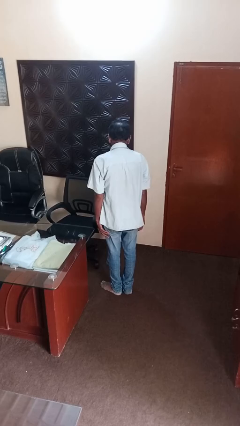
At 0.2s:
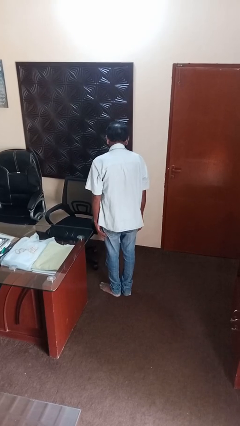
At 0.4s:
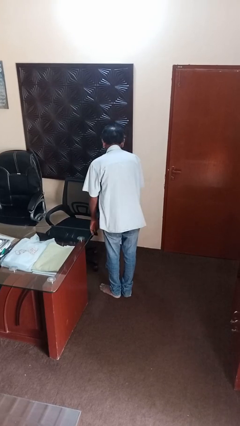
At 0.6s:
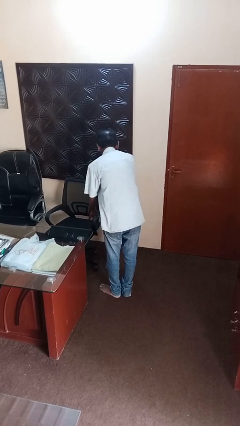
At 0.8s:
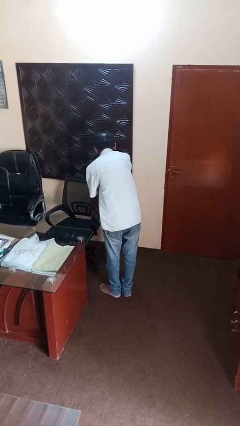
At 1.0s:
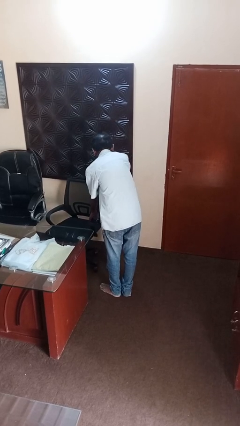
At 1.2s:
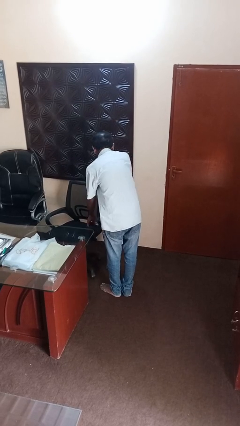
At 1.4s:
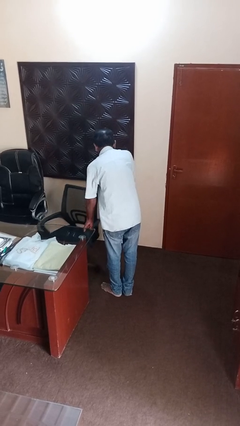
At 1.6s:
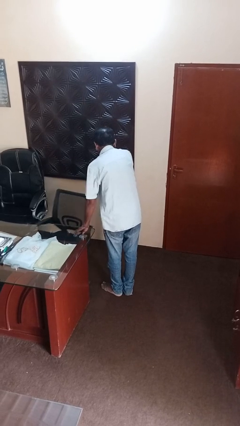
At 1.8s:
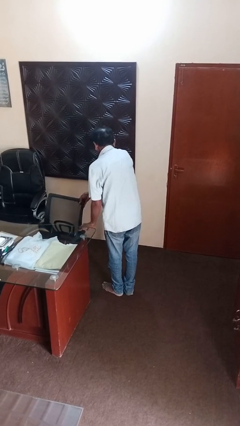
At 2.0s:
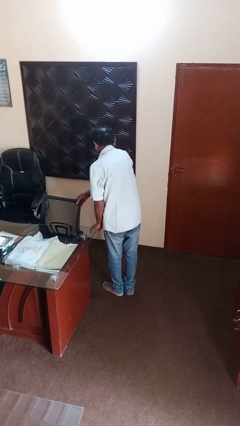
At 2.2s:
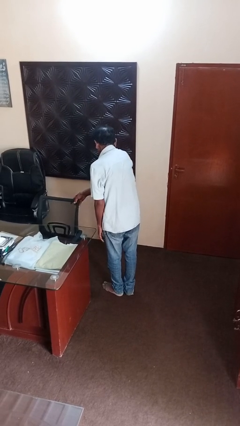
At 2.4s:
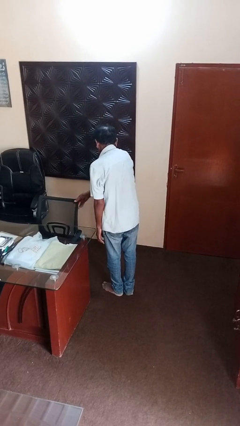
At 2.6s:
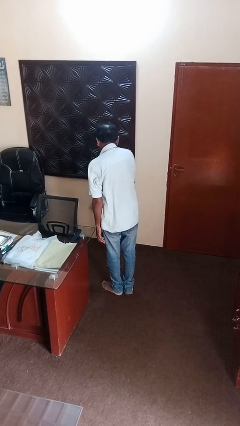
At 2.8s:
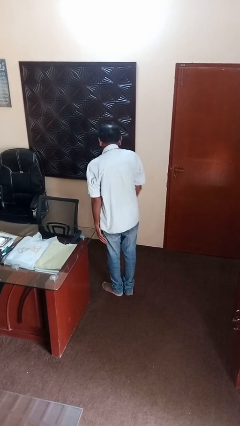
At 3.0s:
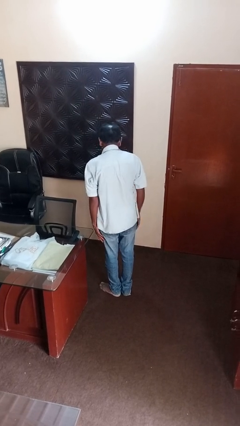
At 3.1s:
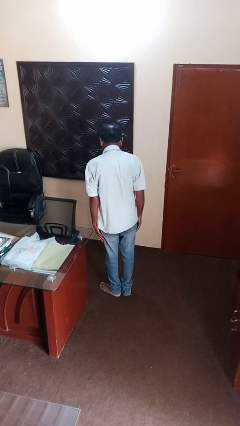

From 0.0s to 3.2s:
person pushes in chair

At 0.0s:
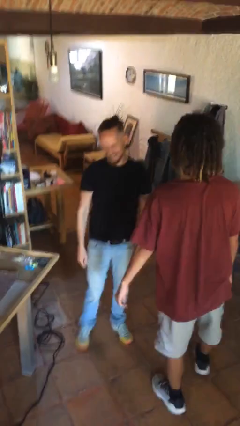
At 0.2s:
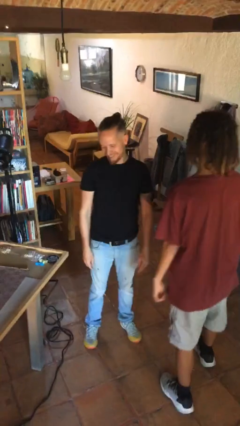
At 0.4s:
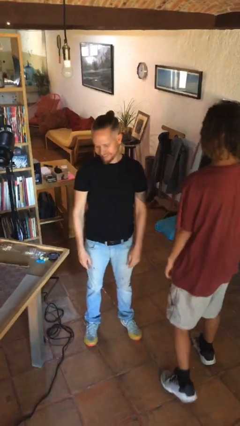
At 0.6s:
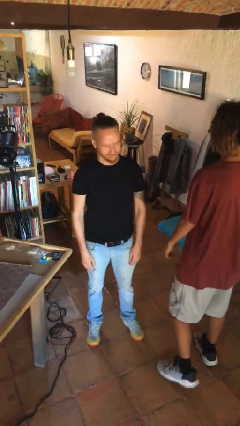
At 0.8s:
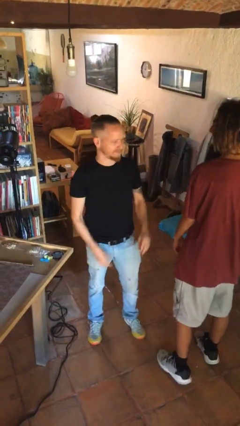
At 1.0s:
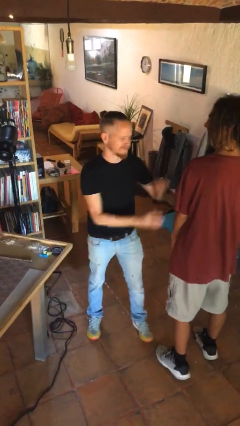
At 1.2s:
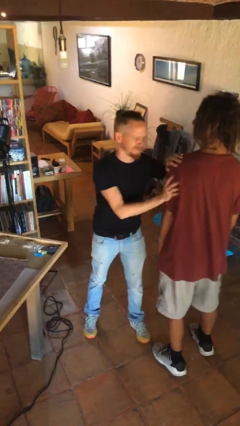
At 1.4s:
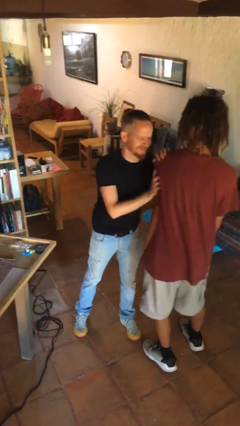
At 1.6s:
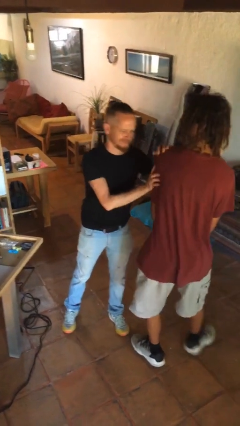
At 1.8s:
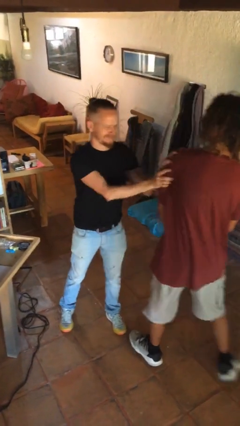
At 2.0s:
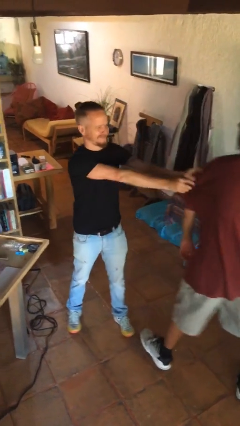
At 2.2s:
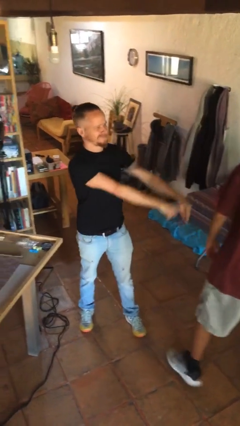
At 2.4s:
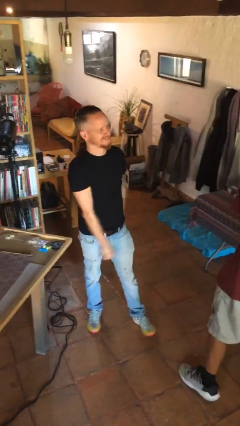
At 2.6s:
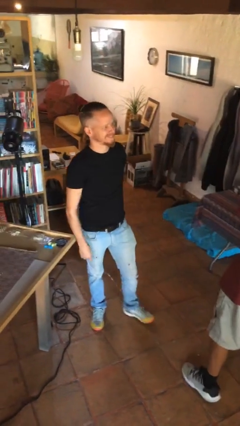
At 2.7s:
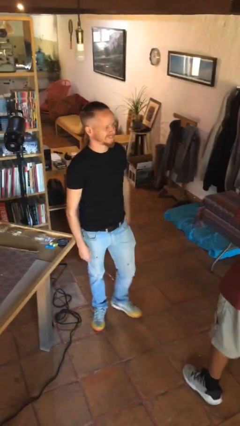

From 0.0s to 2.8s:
person shoves person

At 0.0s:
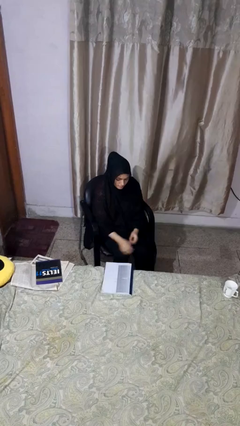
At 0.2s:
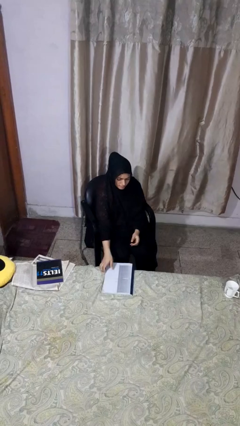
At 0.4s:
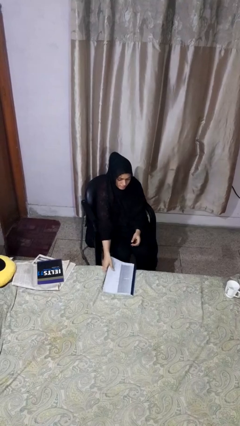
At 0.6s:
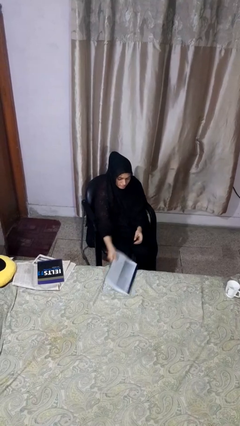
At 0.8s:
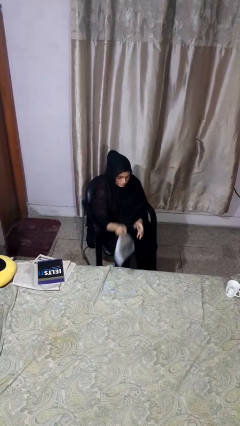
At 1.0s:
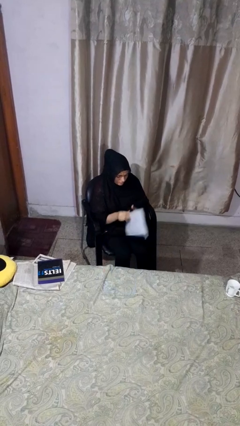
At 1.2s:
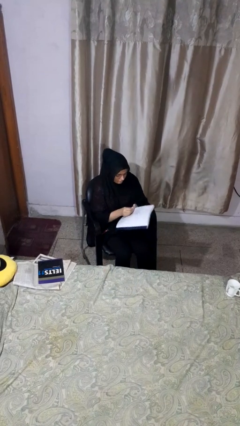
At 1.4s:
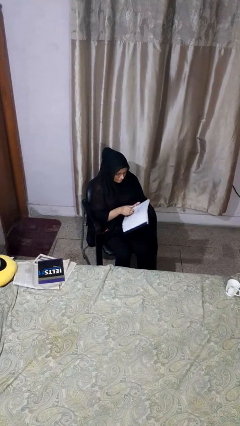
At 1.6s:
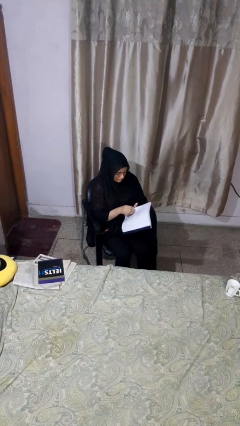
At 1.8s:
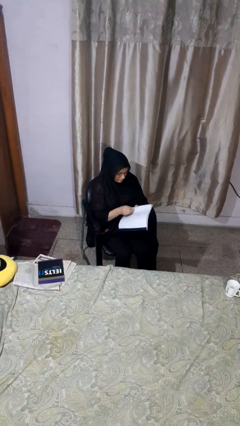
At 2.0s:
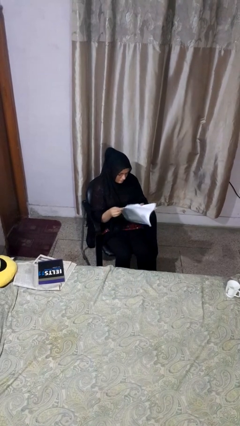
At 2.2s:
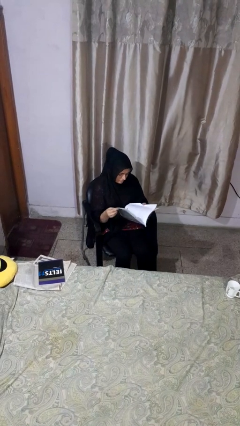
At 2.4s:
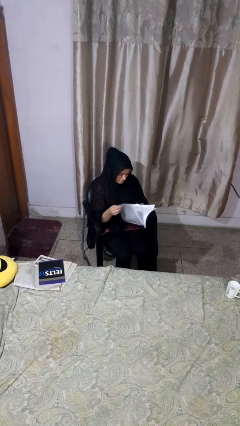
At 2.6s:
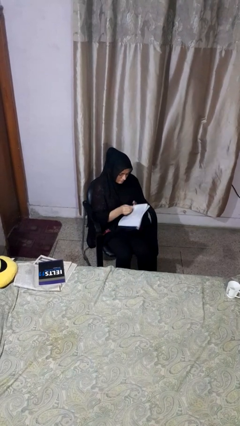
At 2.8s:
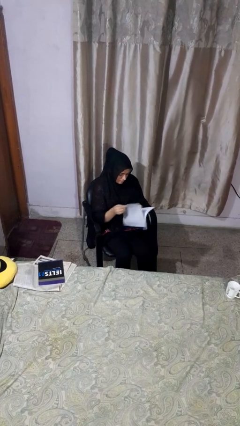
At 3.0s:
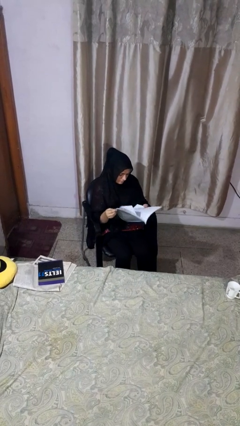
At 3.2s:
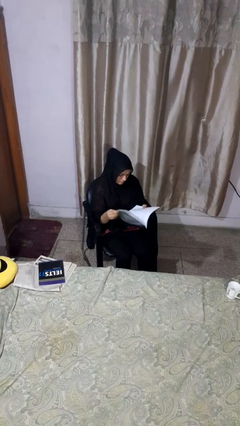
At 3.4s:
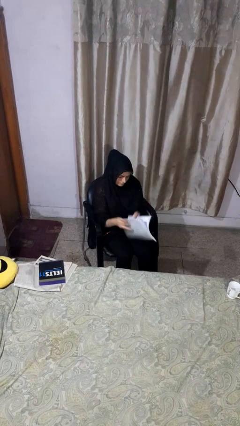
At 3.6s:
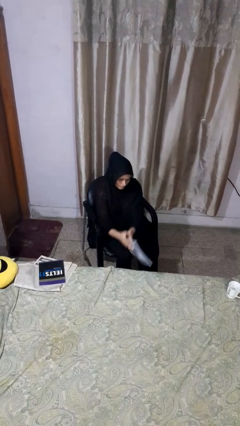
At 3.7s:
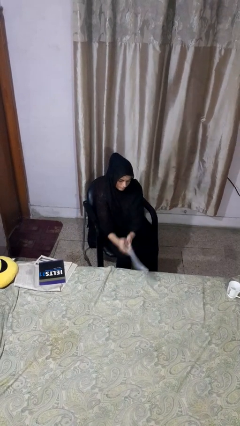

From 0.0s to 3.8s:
person reads magazine

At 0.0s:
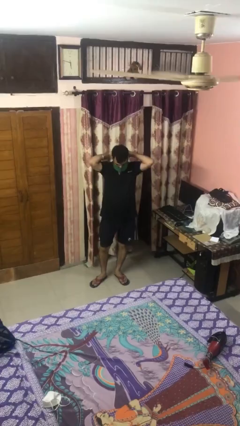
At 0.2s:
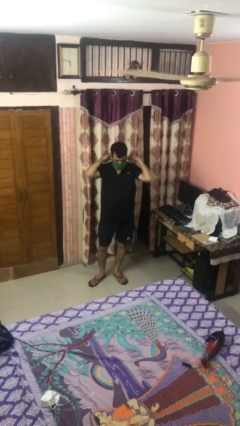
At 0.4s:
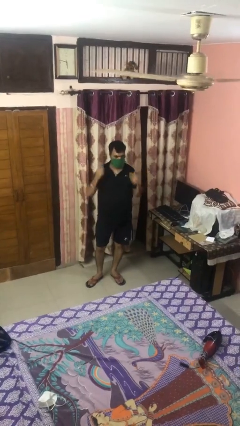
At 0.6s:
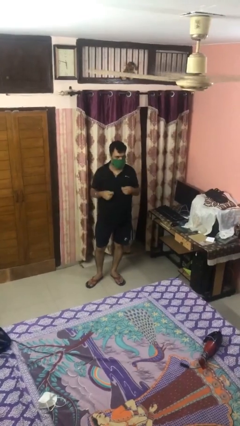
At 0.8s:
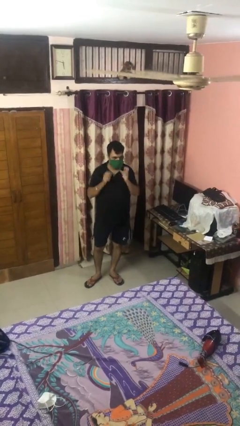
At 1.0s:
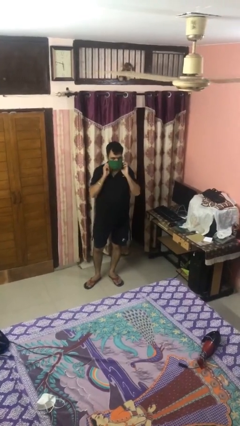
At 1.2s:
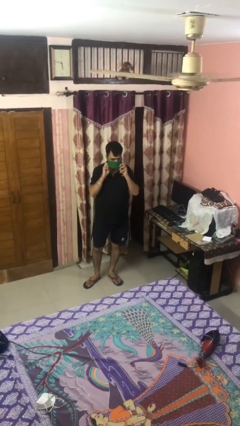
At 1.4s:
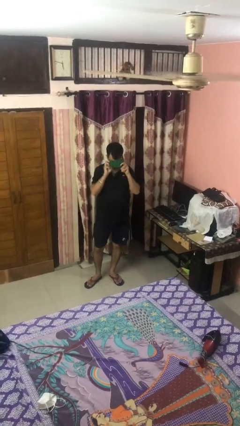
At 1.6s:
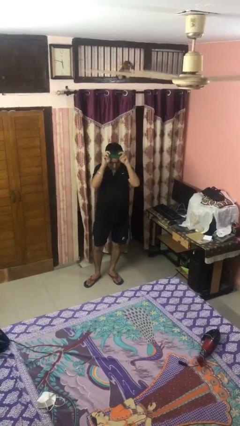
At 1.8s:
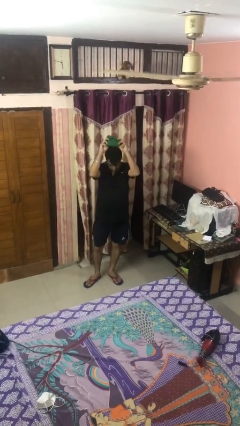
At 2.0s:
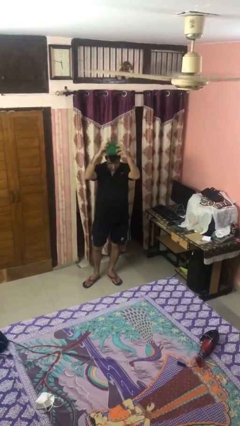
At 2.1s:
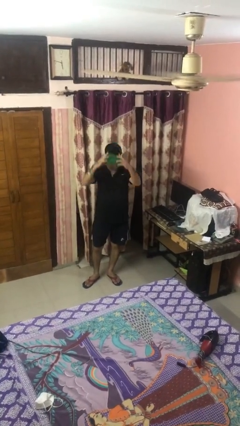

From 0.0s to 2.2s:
person takes off facemask

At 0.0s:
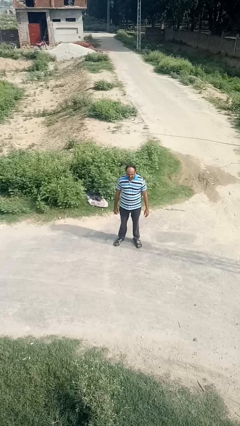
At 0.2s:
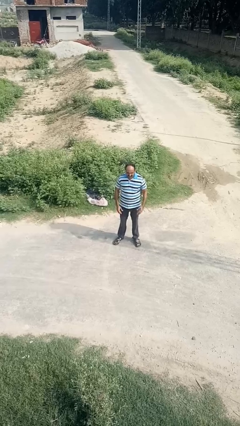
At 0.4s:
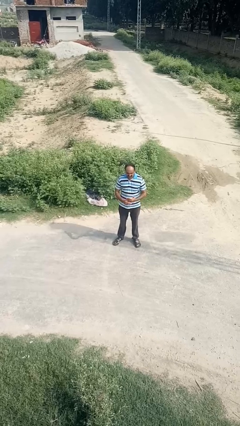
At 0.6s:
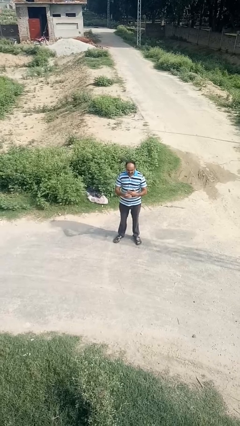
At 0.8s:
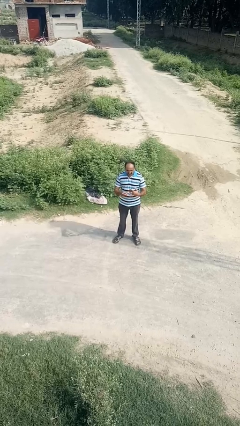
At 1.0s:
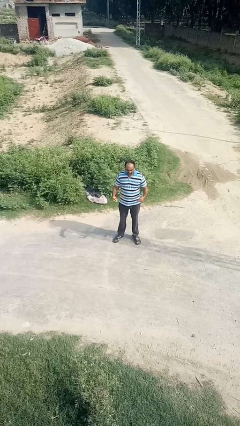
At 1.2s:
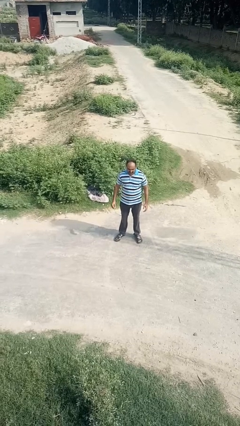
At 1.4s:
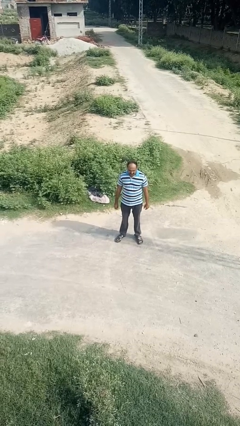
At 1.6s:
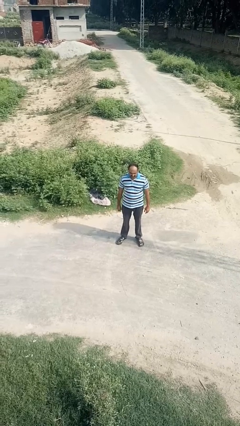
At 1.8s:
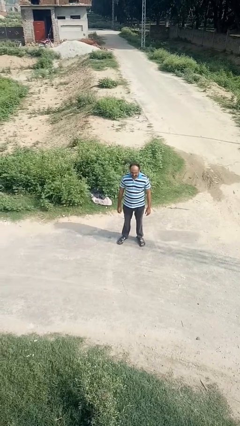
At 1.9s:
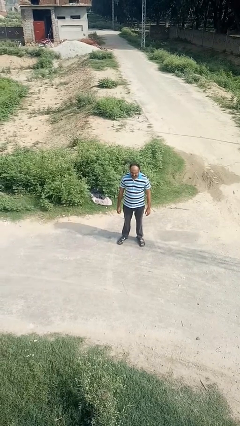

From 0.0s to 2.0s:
person takes off ring

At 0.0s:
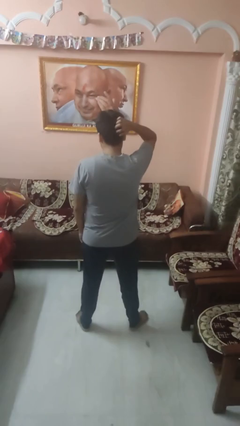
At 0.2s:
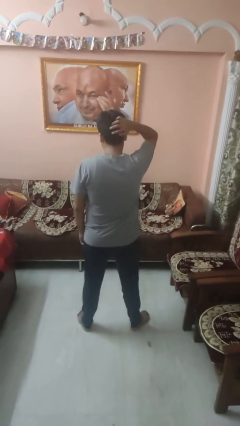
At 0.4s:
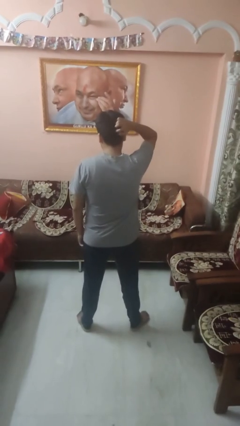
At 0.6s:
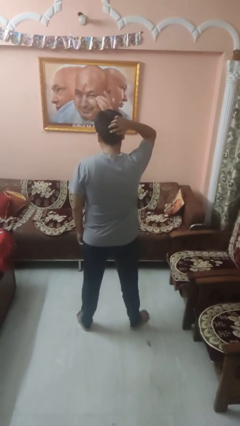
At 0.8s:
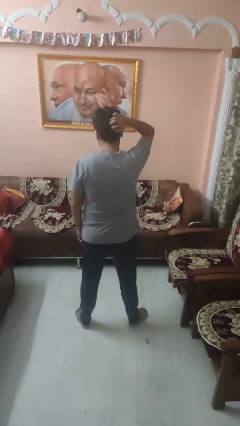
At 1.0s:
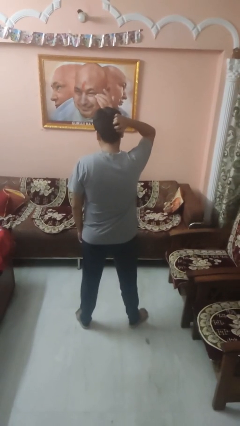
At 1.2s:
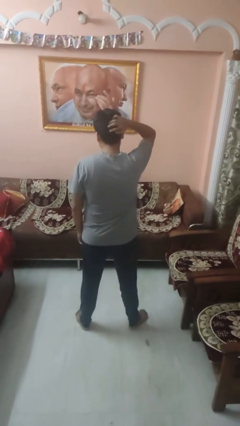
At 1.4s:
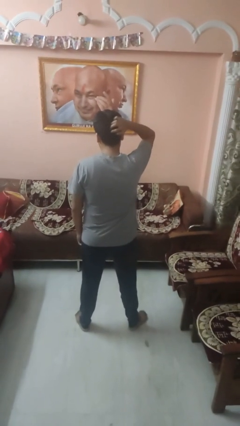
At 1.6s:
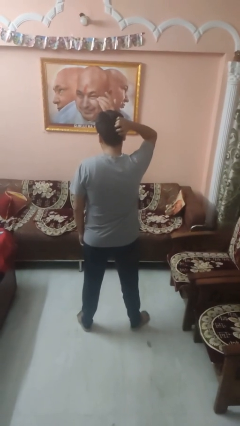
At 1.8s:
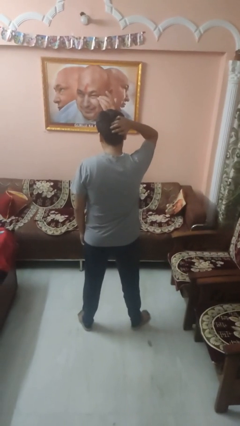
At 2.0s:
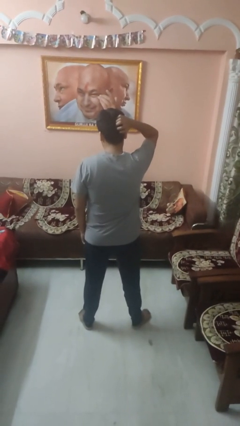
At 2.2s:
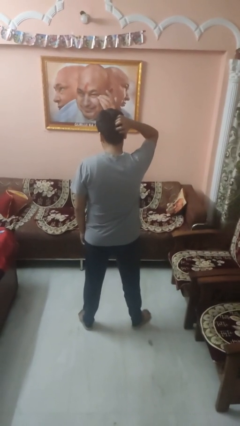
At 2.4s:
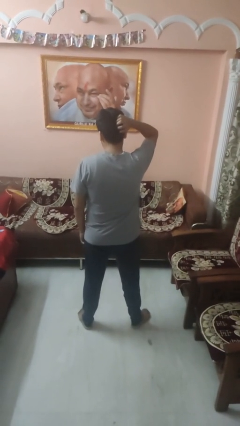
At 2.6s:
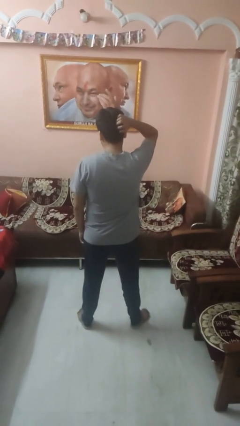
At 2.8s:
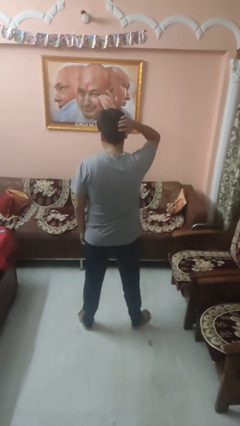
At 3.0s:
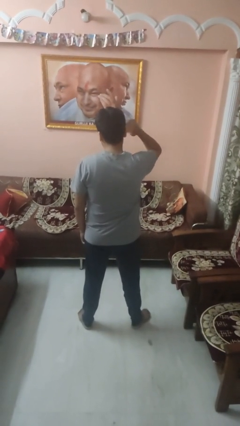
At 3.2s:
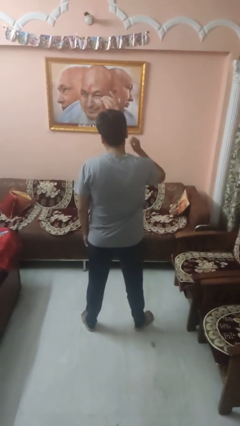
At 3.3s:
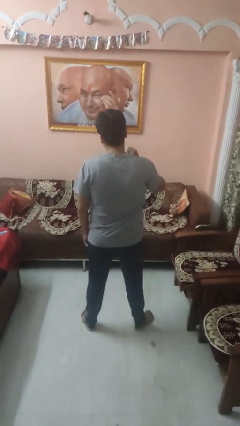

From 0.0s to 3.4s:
person scratches face
